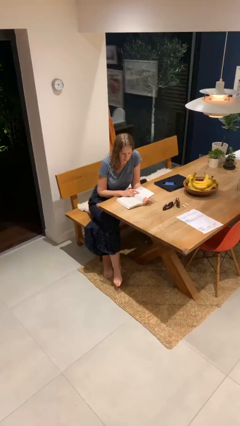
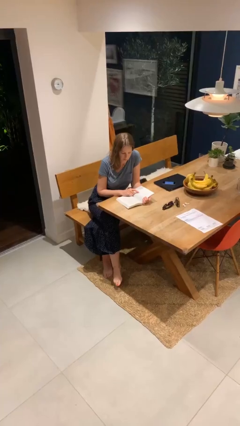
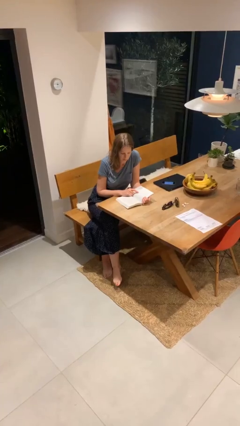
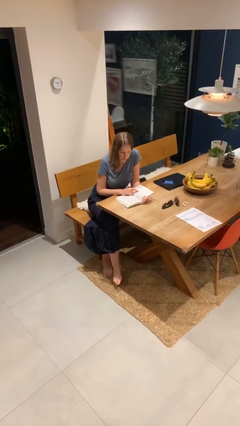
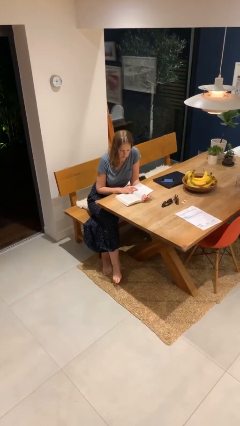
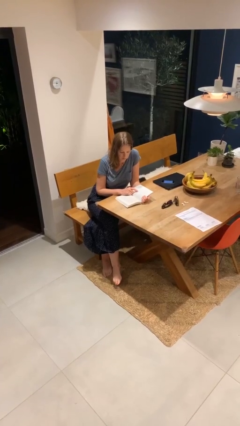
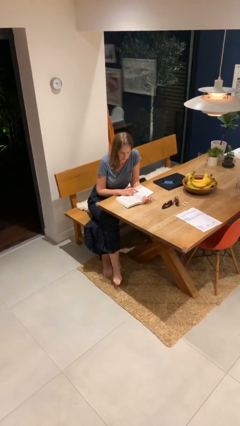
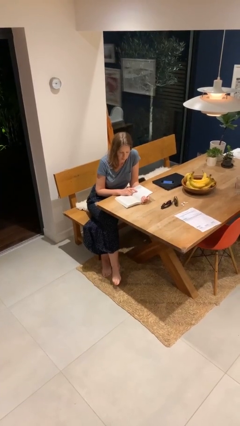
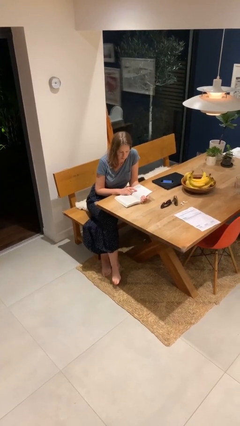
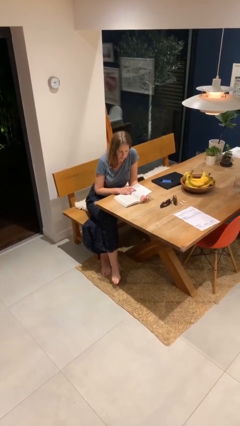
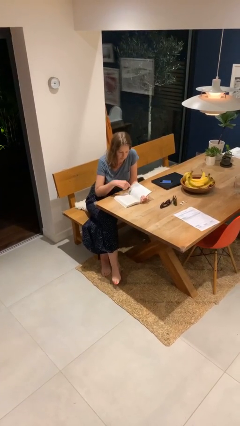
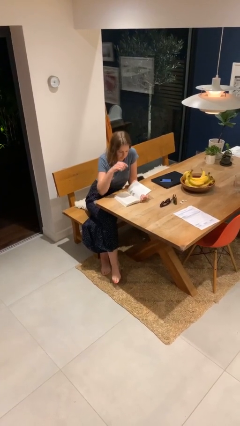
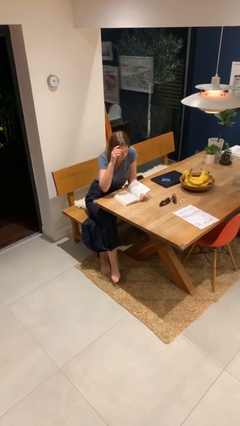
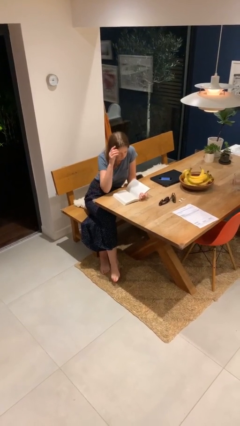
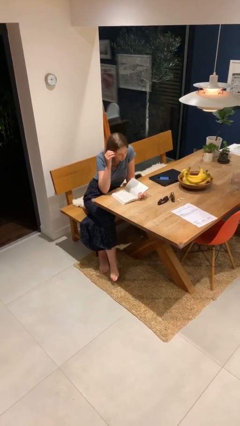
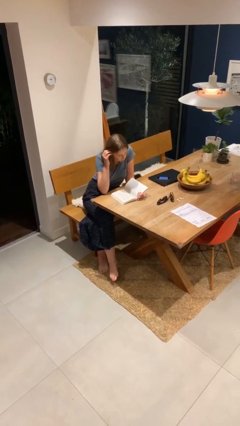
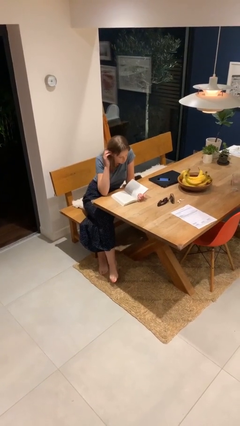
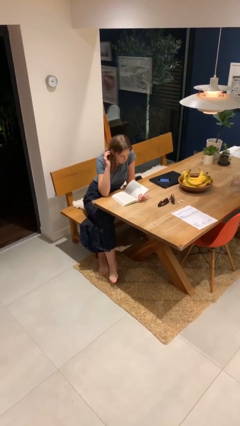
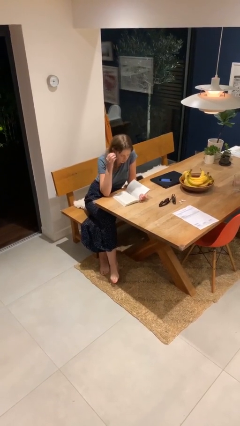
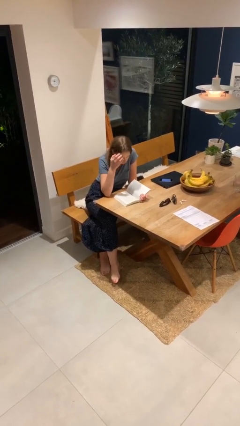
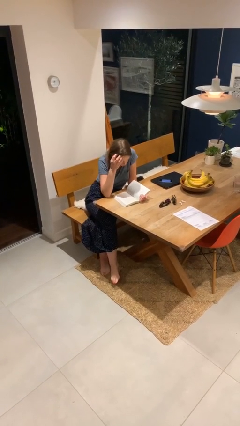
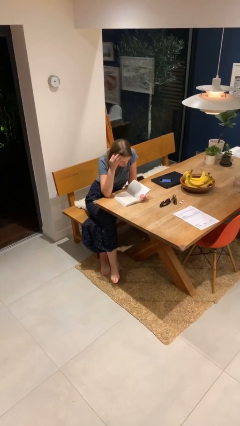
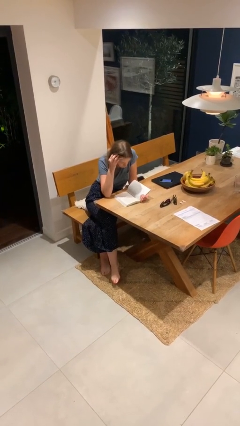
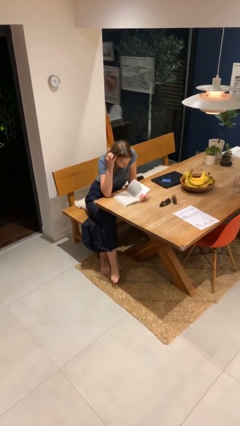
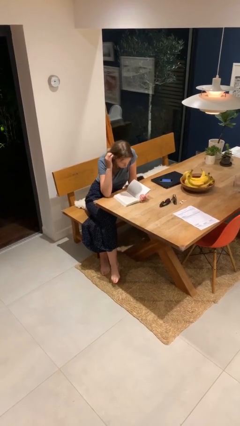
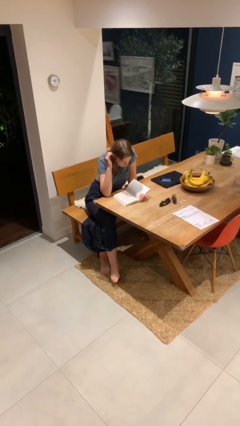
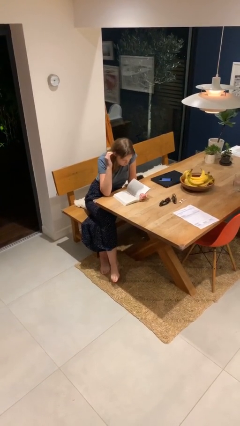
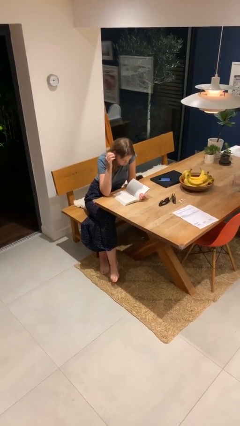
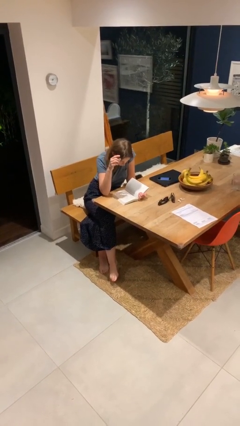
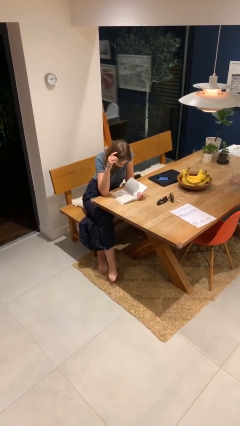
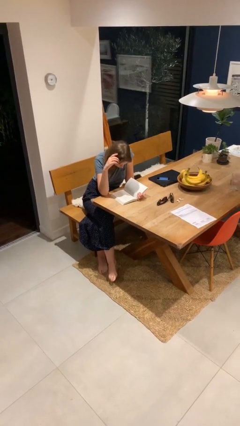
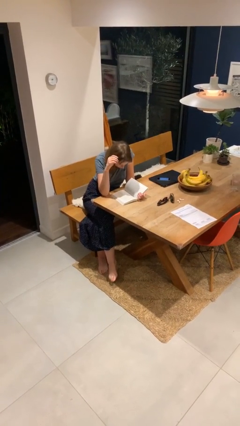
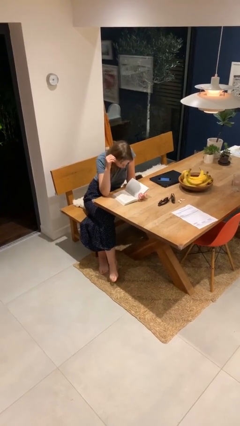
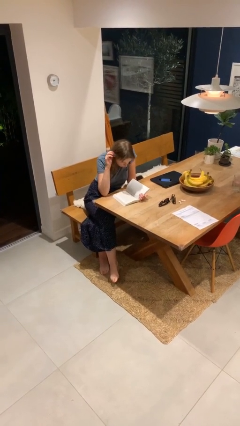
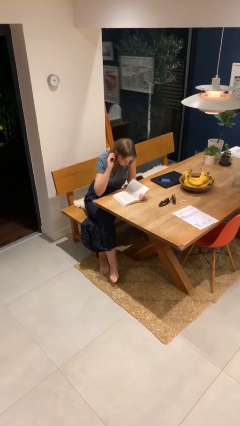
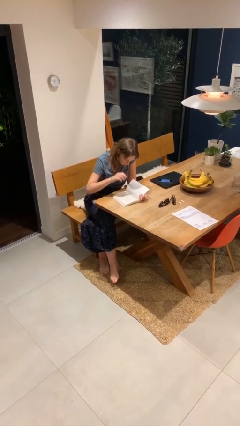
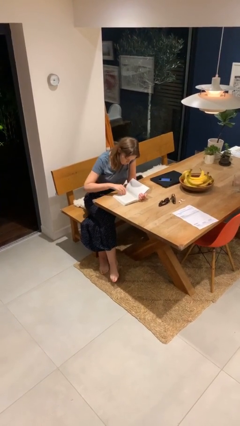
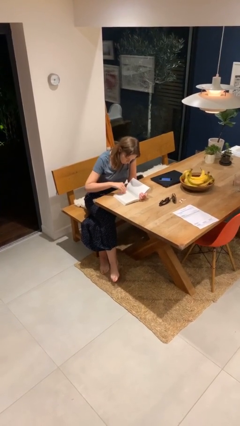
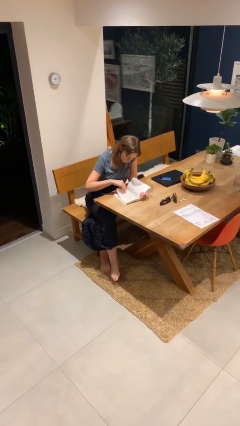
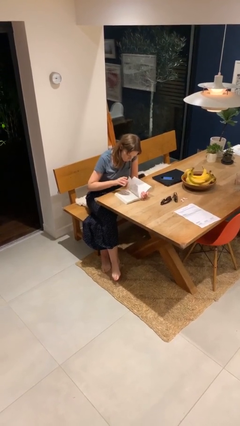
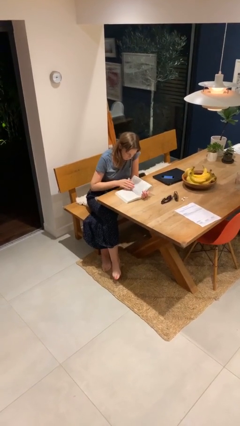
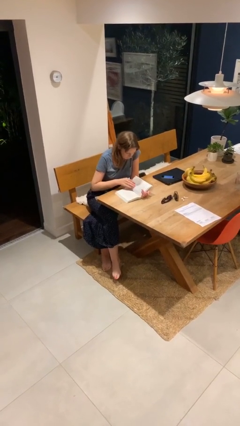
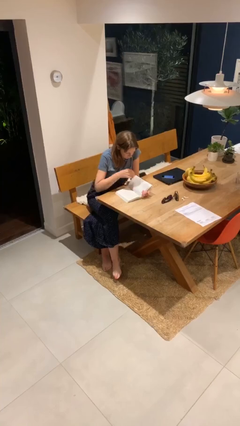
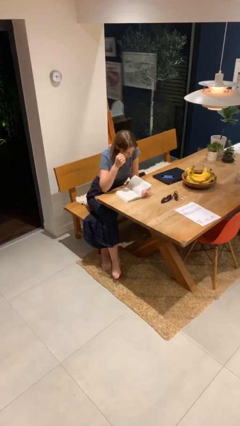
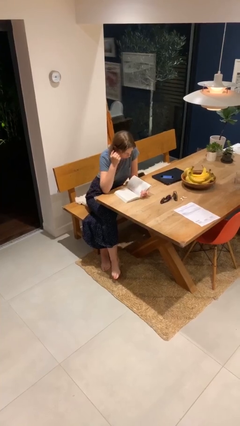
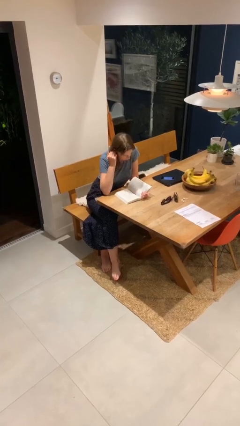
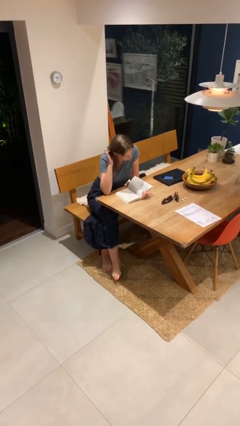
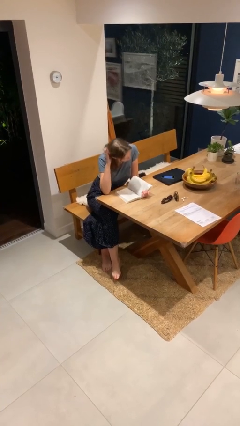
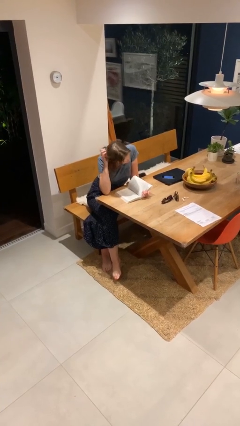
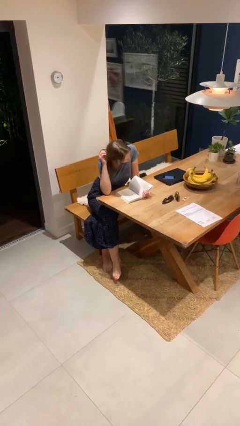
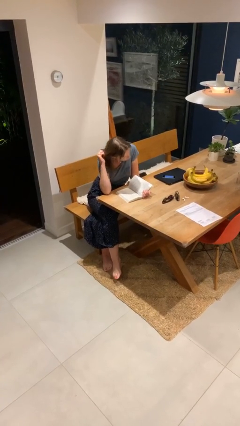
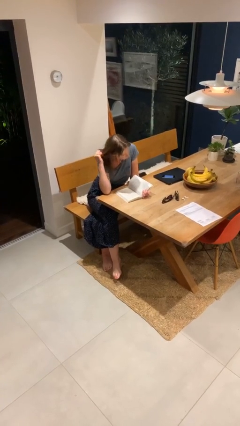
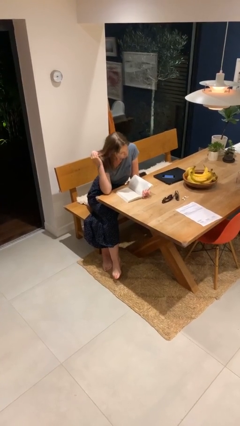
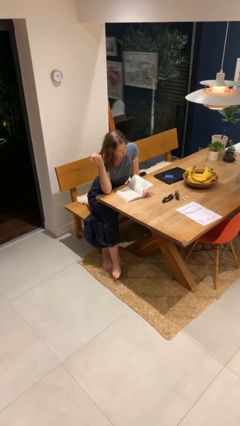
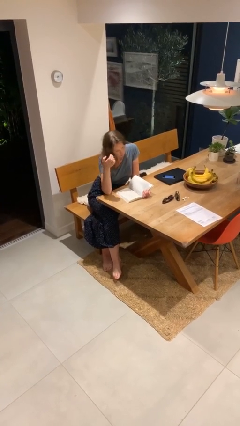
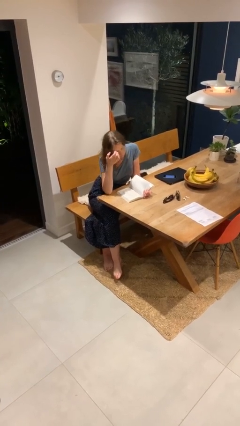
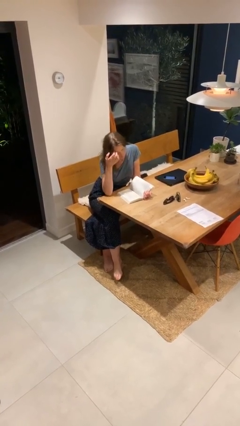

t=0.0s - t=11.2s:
person reads document

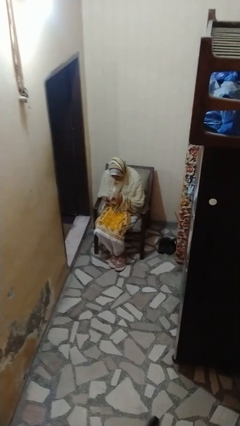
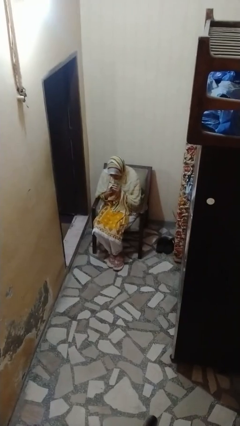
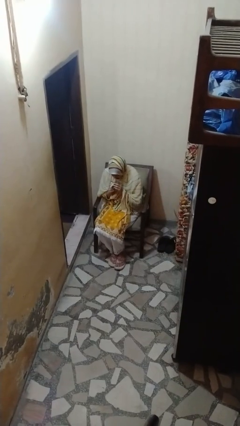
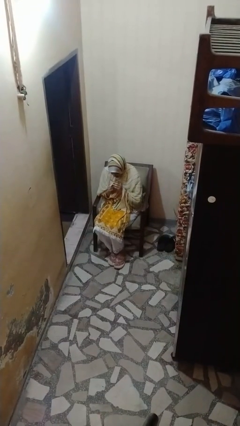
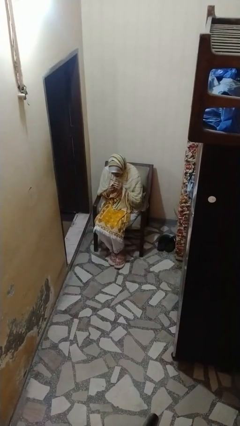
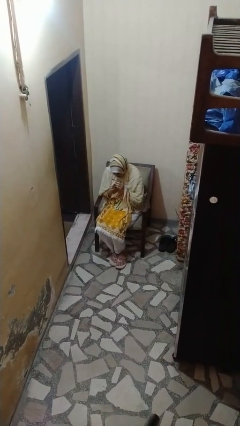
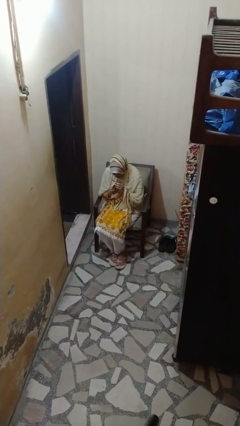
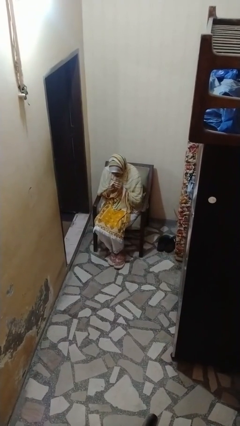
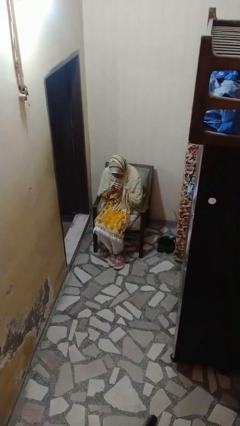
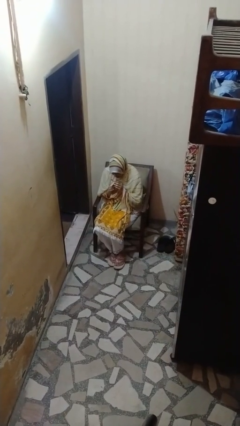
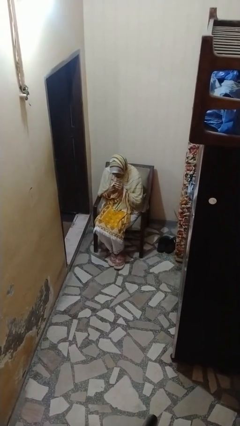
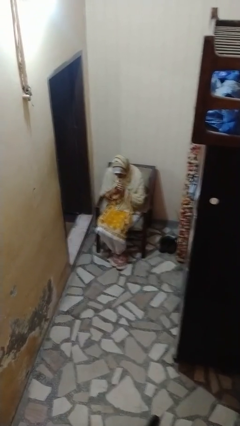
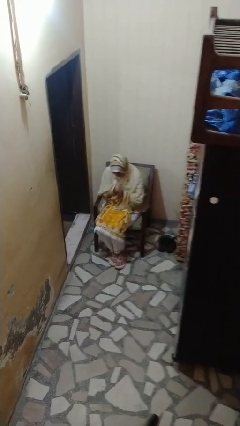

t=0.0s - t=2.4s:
person eats banana

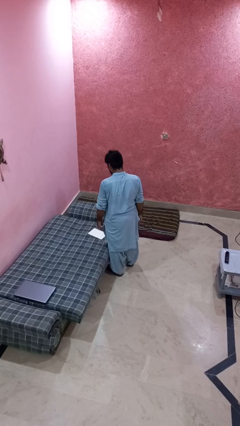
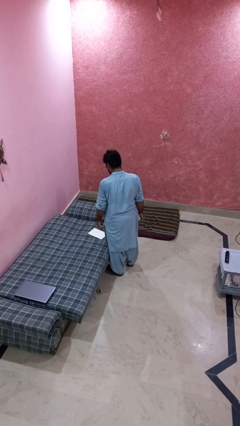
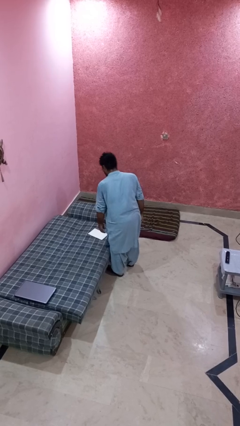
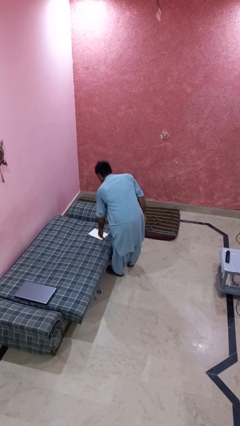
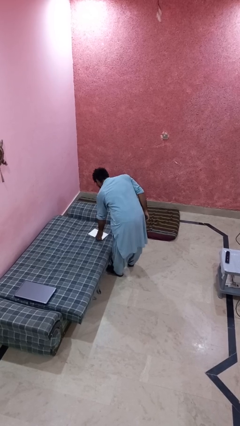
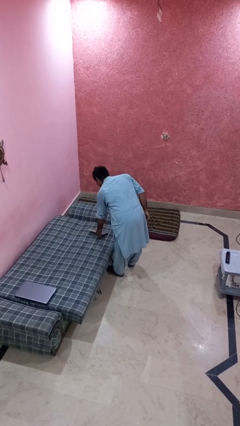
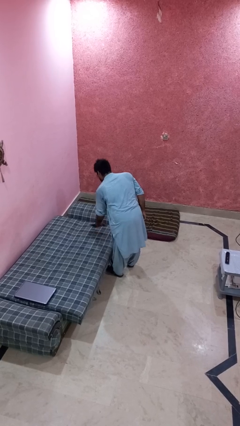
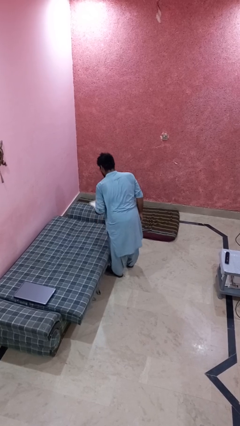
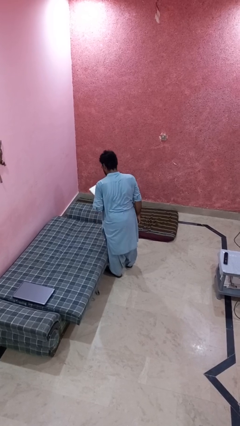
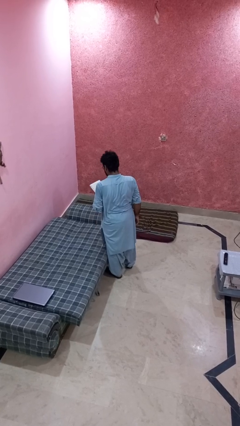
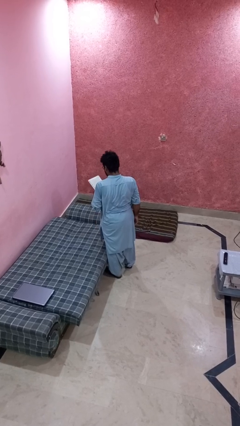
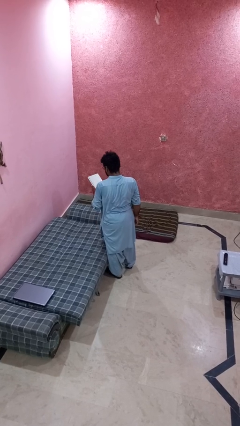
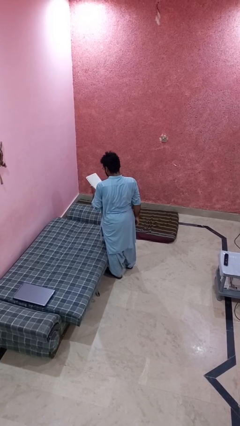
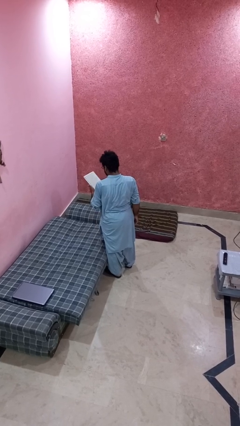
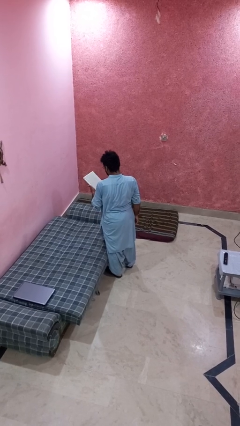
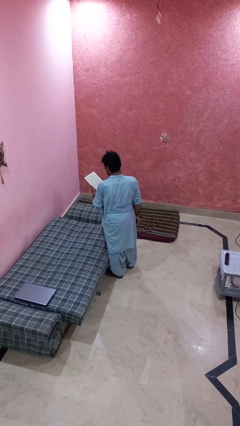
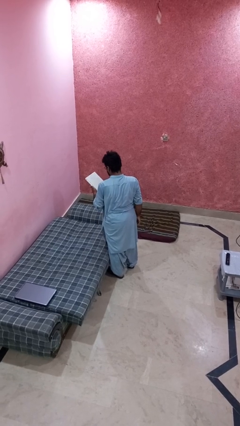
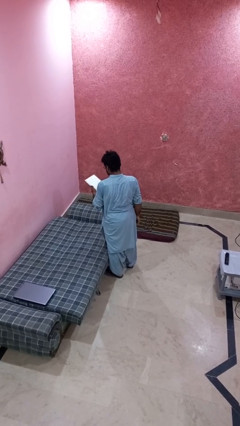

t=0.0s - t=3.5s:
person picks up object from bed

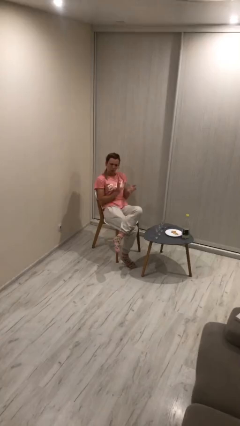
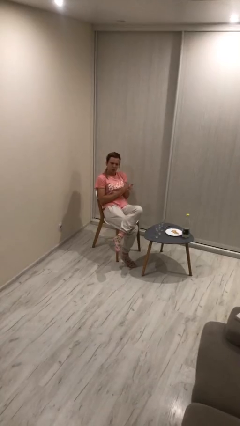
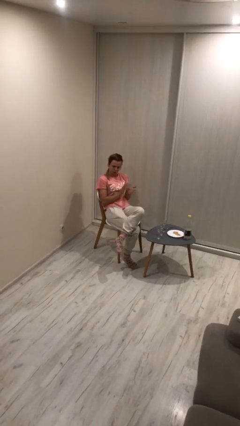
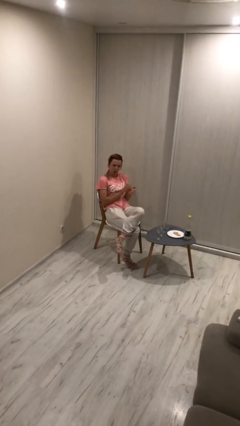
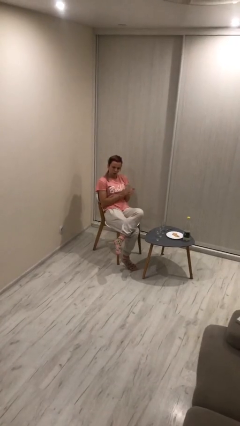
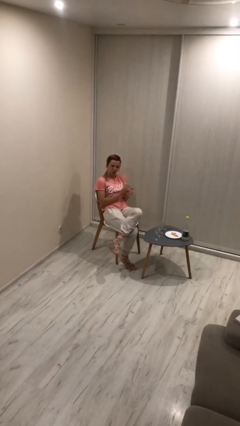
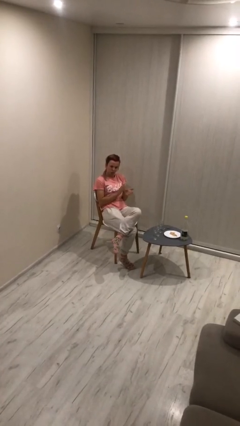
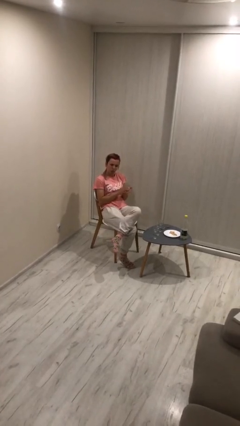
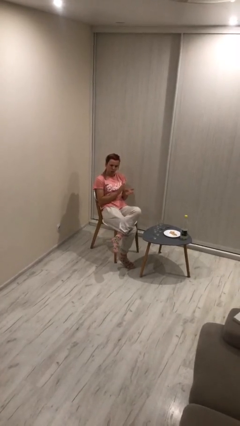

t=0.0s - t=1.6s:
person claps hands
